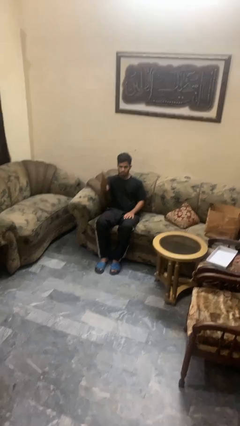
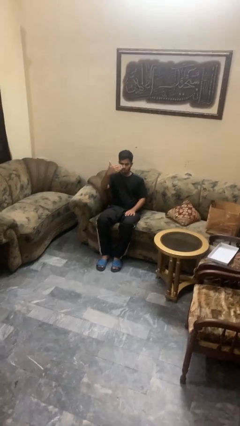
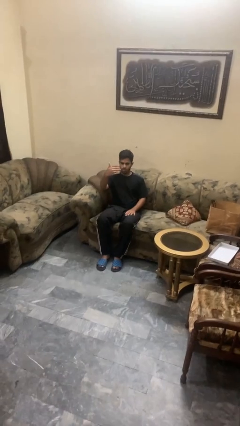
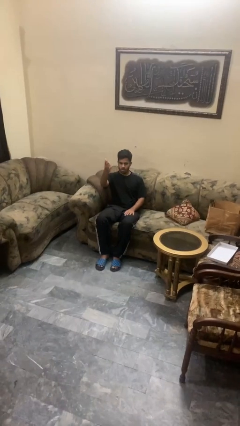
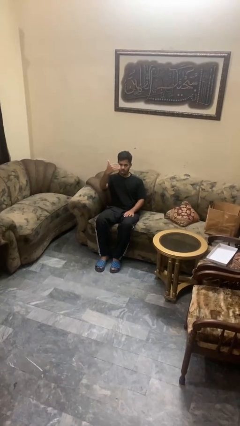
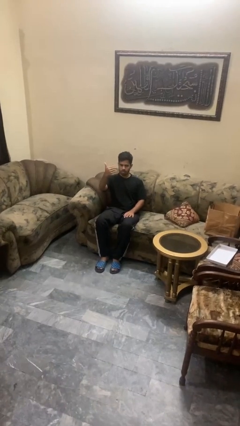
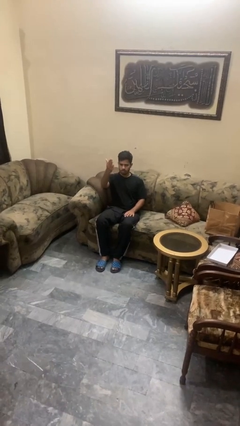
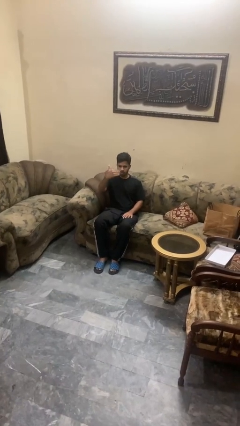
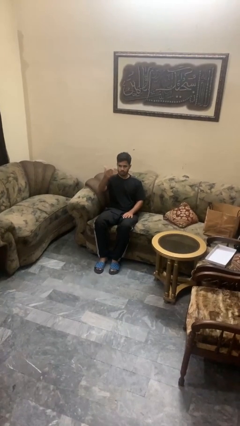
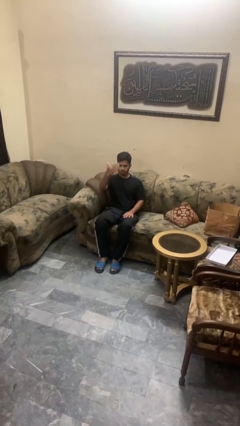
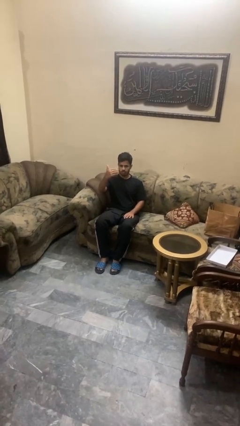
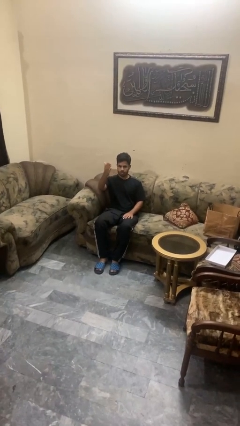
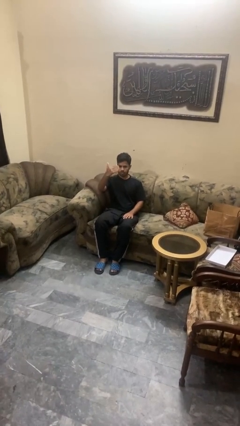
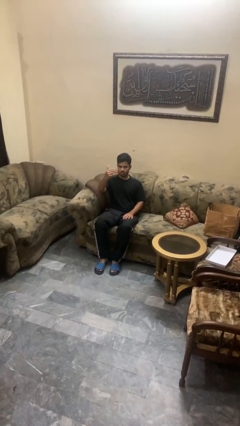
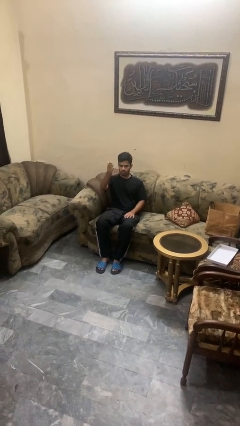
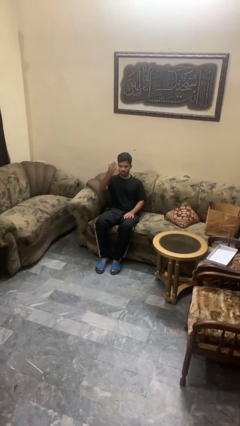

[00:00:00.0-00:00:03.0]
person gestures come here

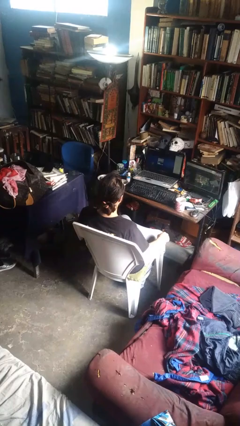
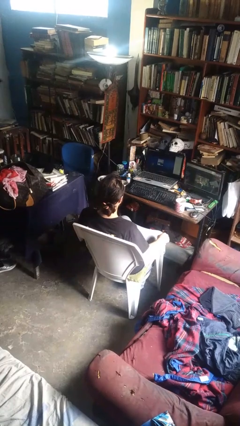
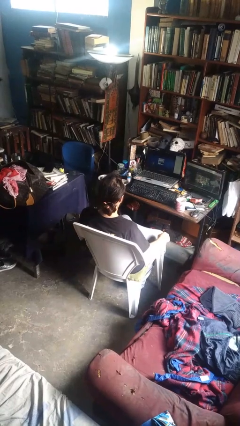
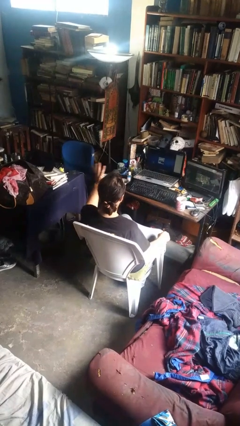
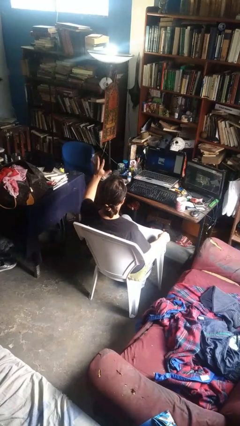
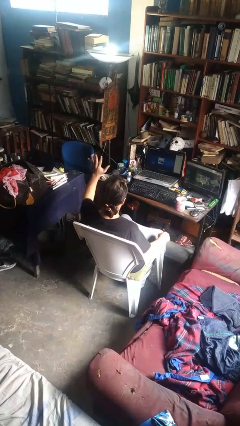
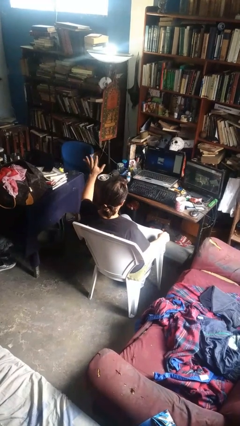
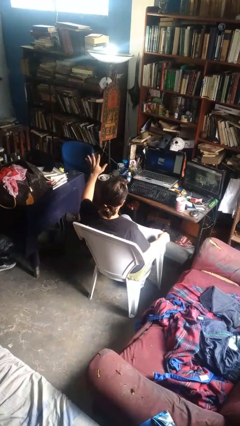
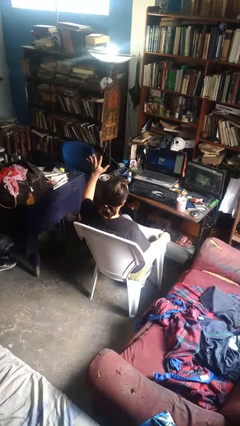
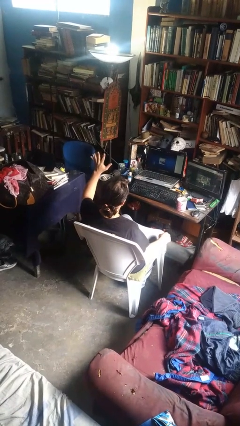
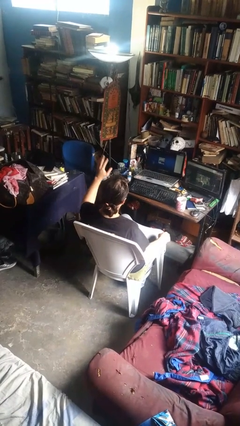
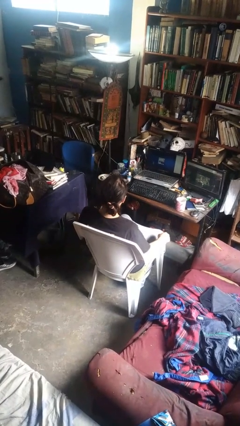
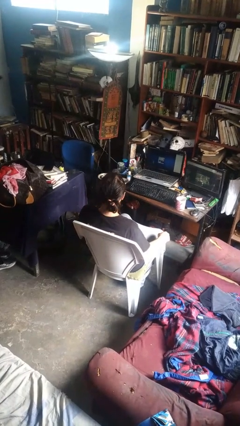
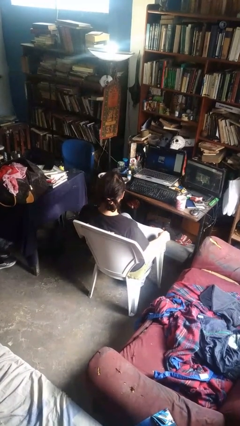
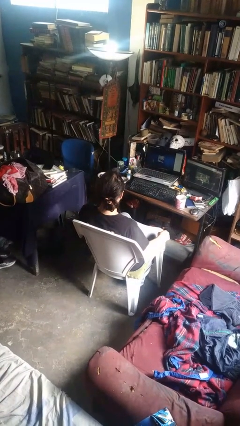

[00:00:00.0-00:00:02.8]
person gestures number five

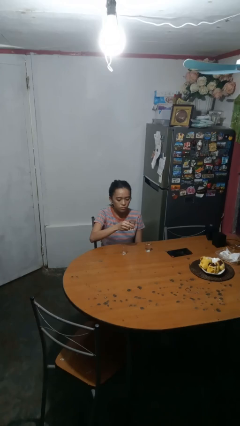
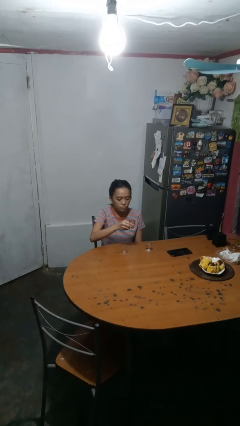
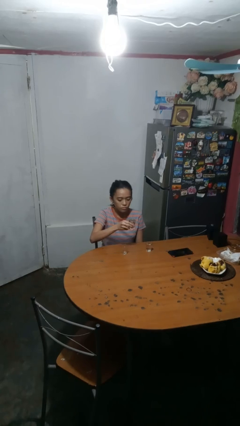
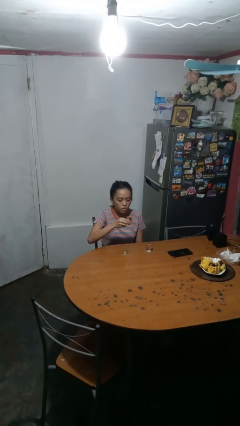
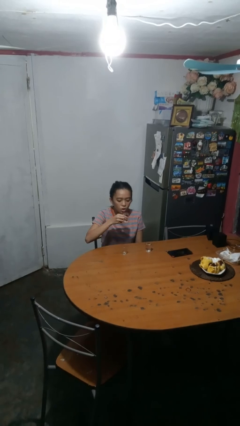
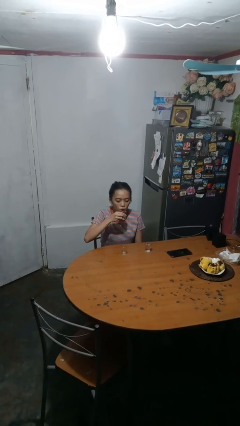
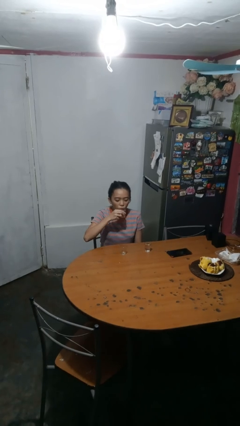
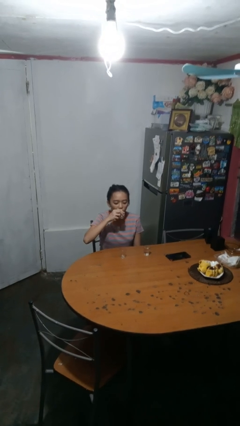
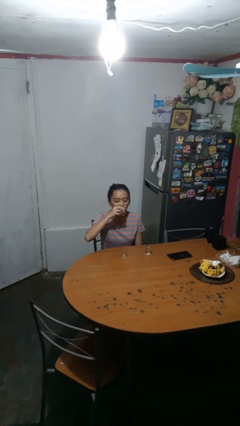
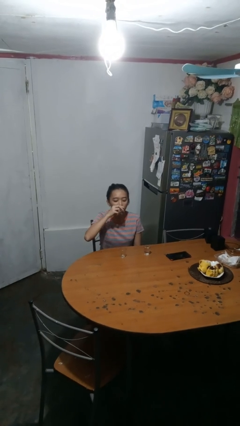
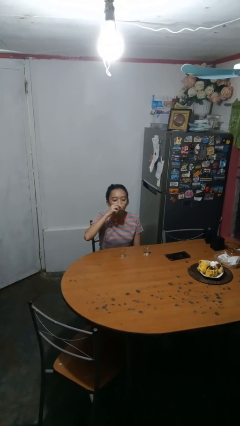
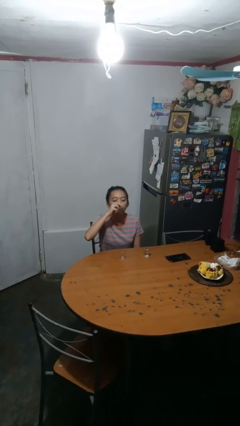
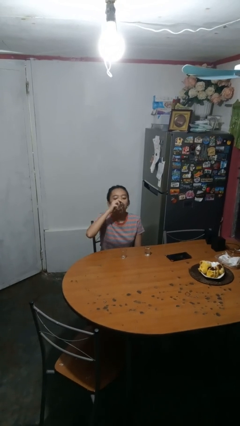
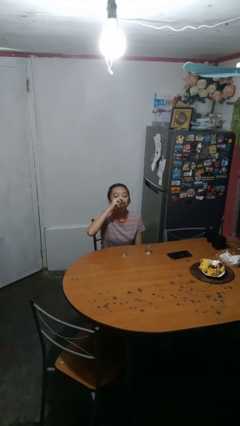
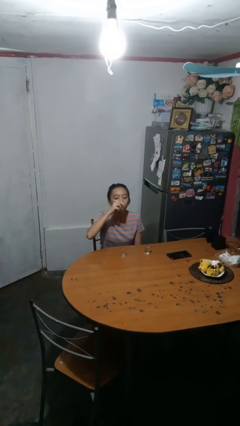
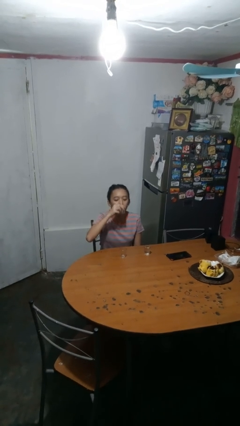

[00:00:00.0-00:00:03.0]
person drinks from shotglass

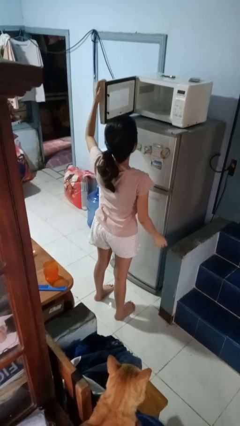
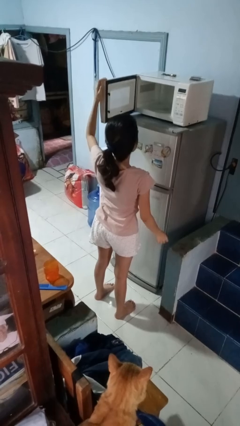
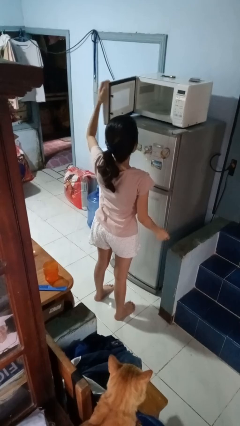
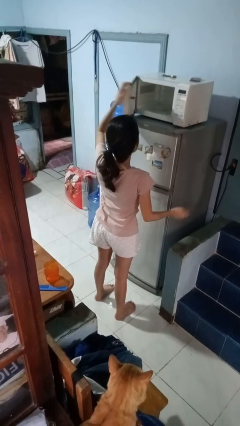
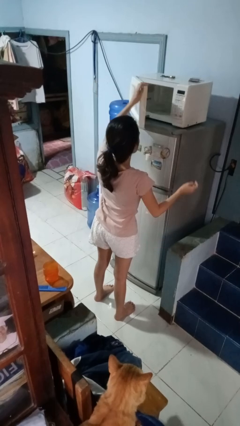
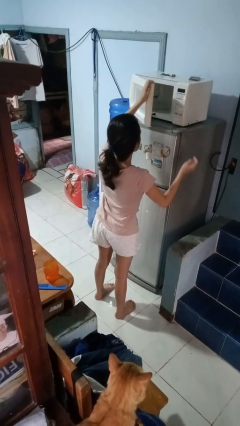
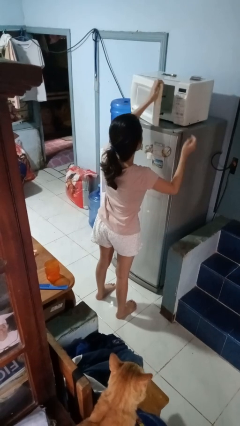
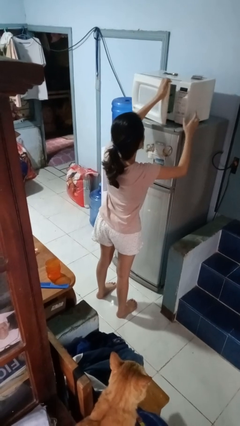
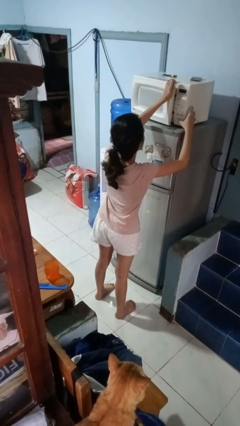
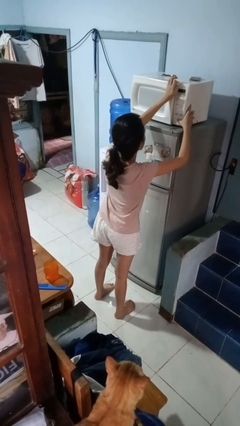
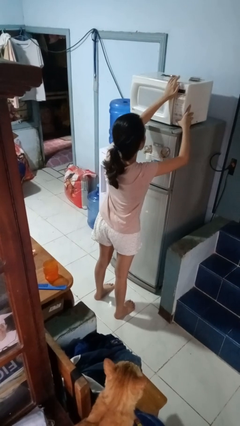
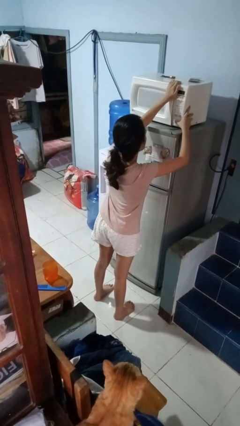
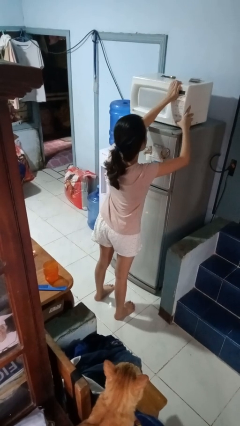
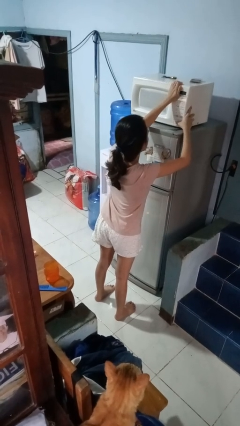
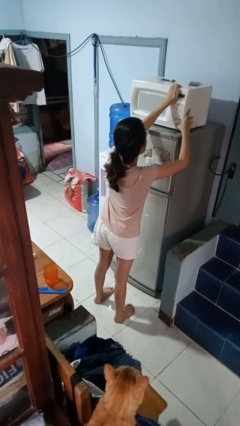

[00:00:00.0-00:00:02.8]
person closes microwave

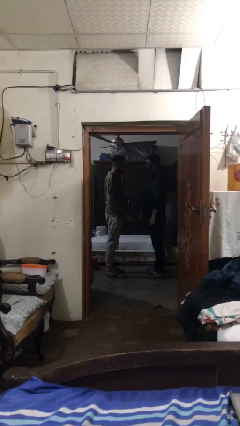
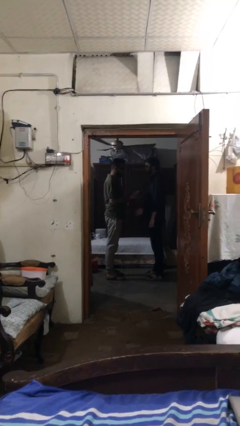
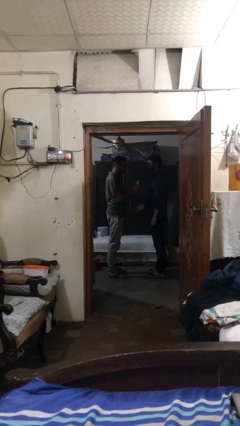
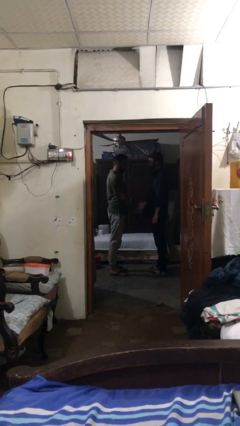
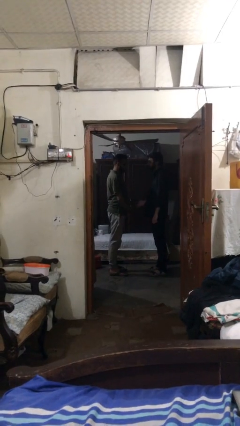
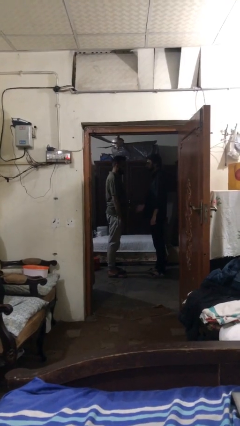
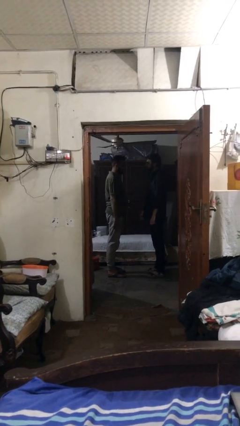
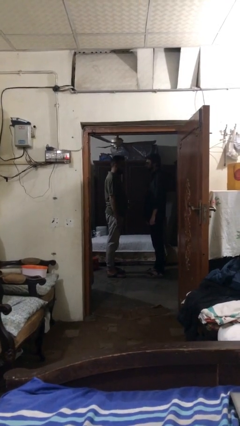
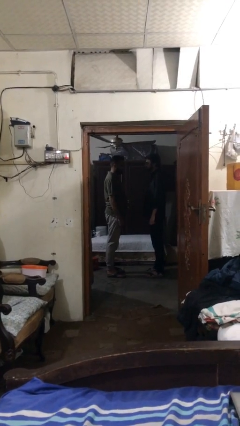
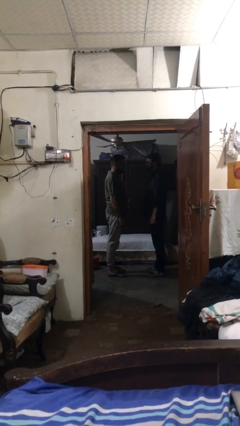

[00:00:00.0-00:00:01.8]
person highfives hand

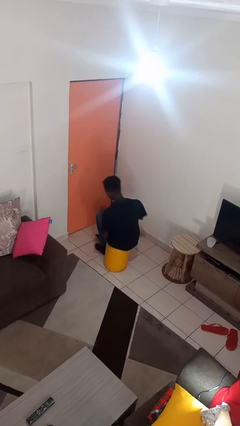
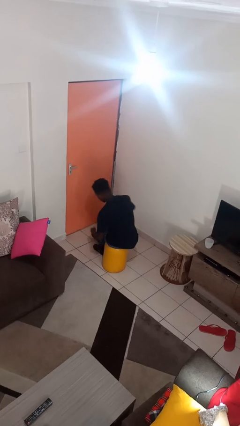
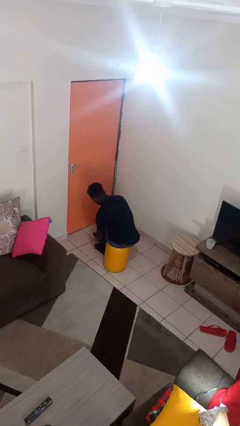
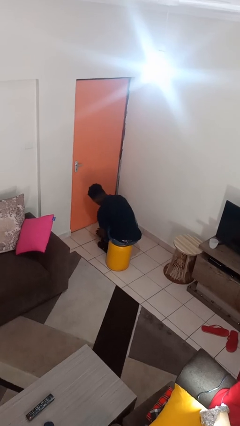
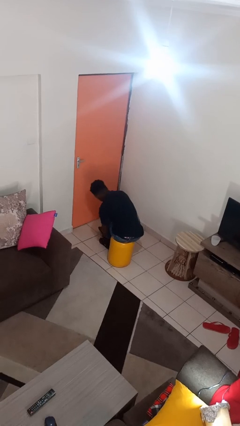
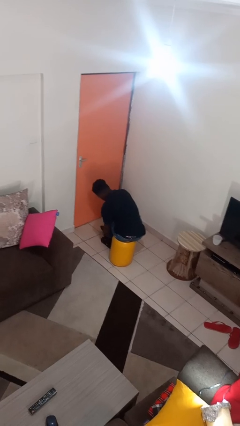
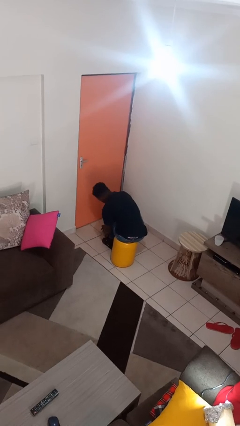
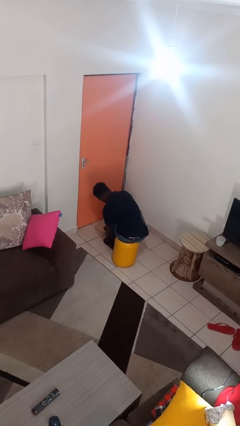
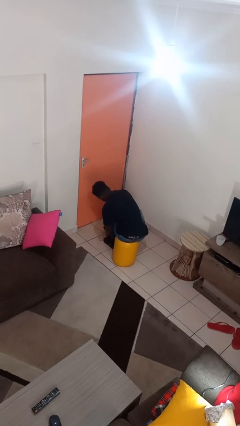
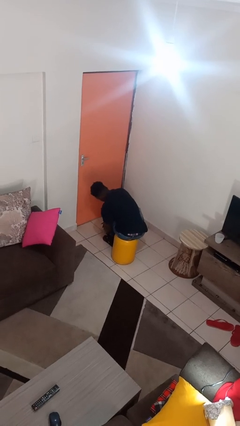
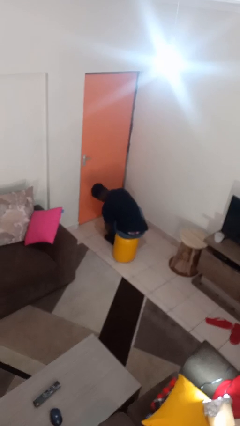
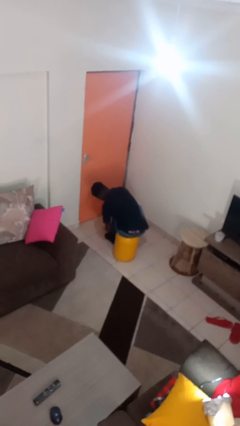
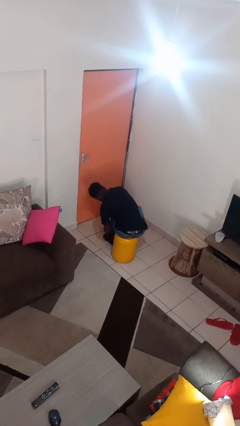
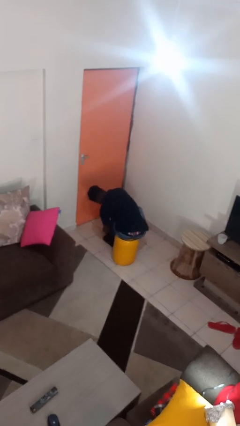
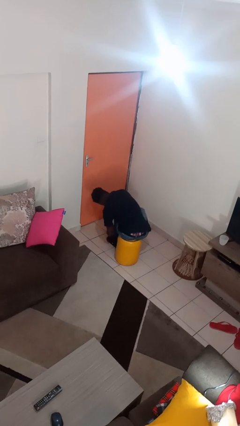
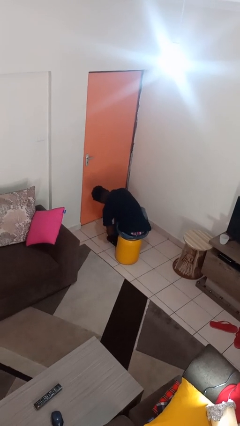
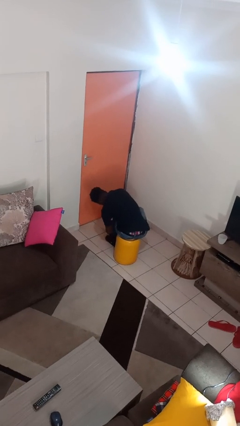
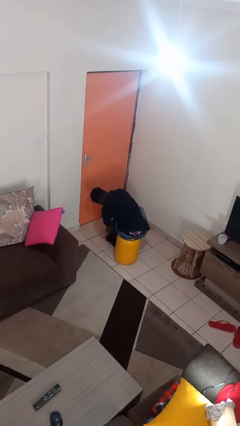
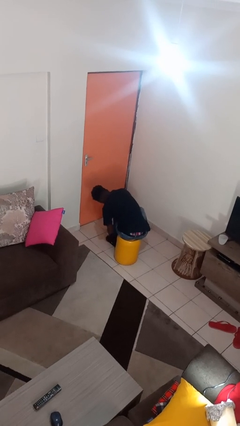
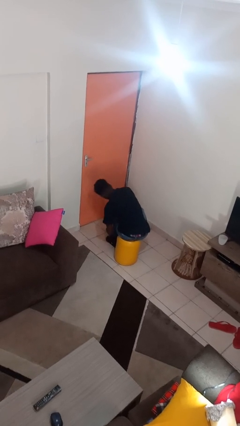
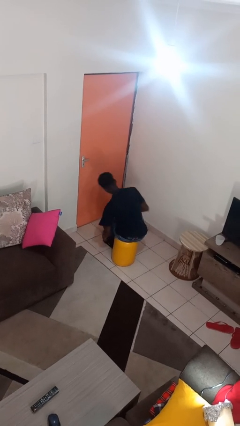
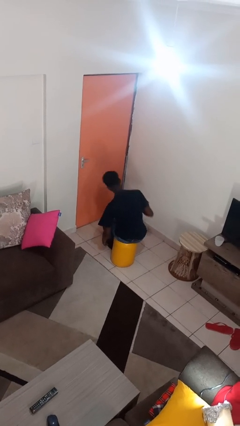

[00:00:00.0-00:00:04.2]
person rubs foot

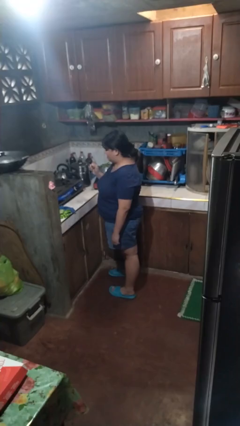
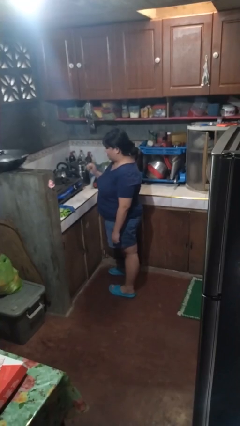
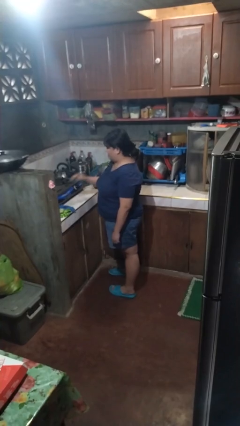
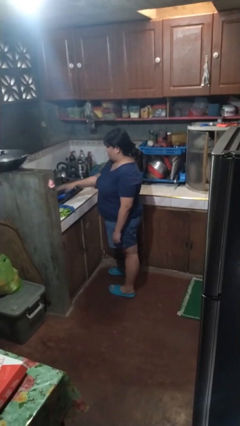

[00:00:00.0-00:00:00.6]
person burns hand
